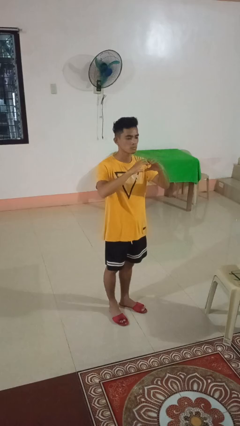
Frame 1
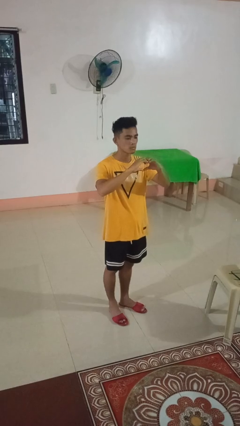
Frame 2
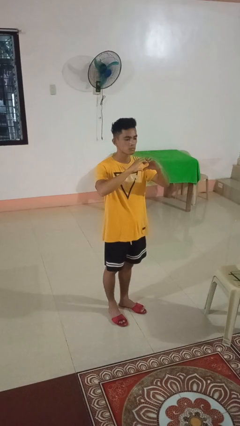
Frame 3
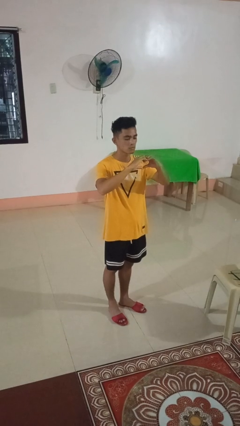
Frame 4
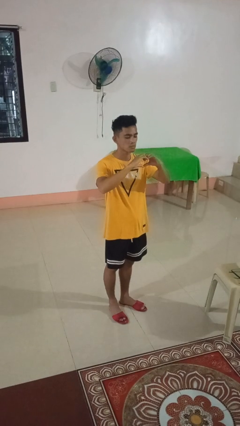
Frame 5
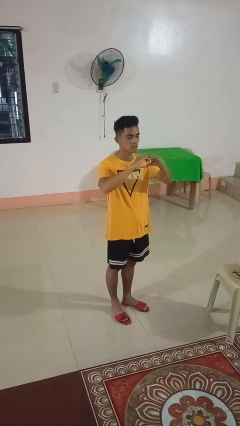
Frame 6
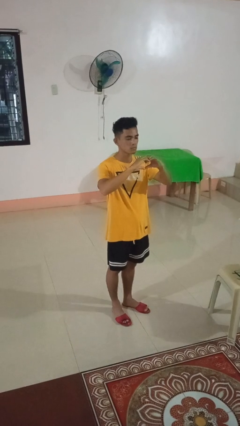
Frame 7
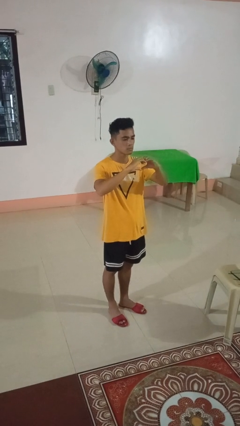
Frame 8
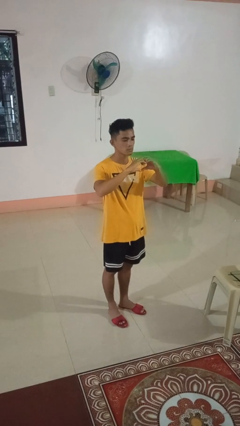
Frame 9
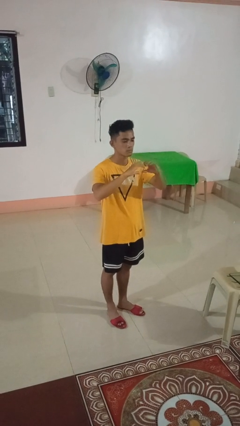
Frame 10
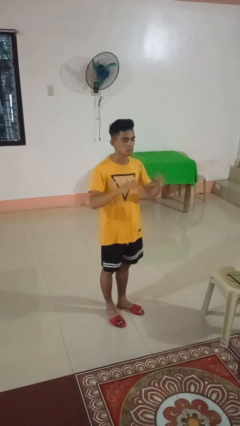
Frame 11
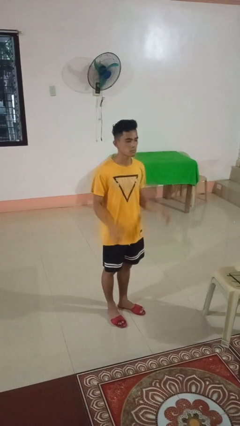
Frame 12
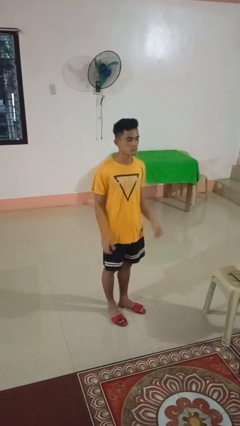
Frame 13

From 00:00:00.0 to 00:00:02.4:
person gestures heart

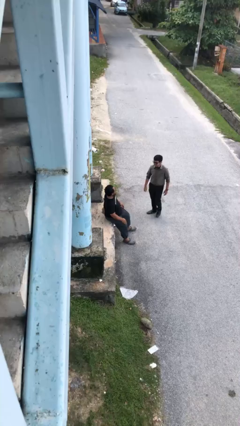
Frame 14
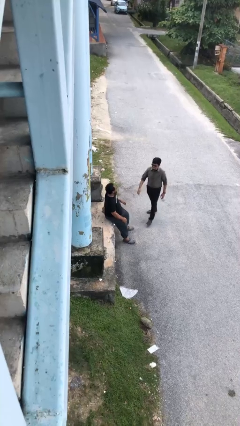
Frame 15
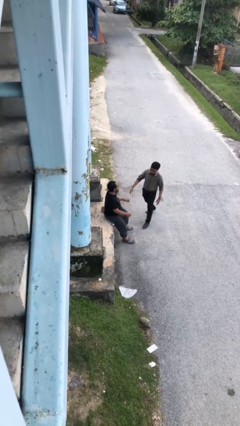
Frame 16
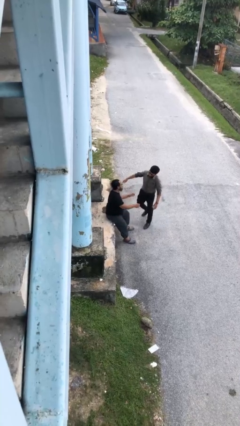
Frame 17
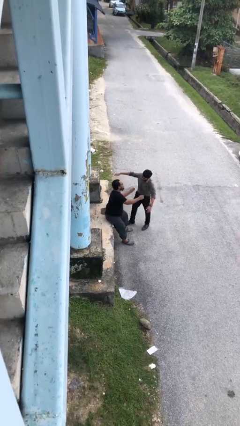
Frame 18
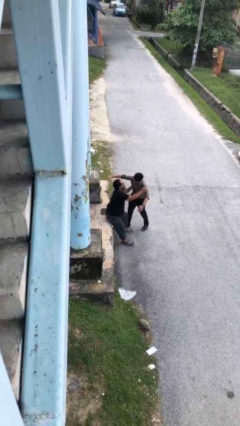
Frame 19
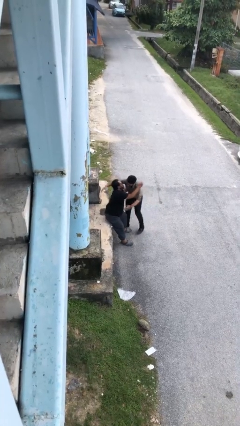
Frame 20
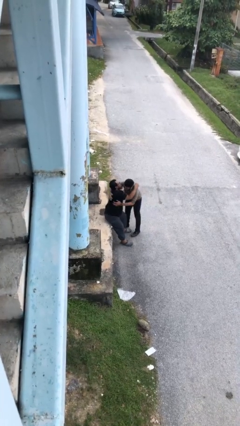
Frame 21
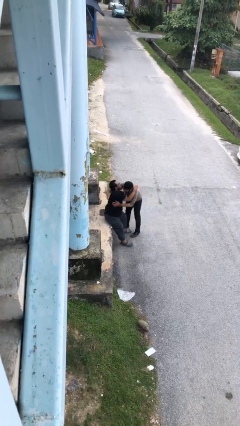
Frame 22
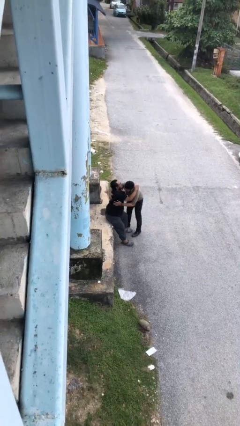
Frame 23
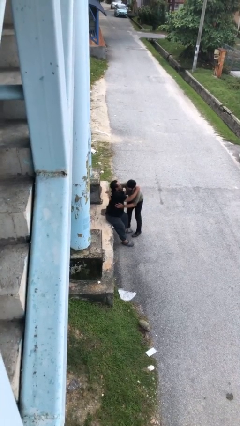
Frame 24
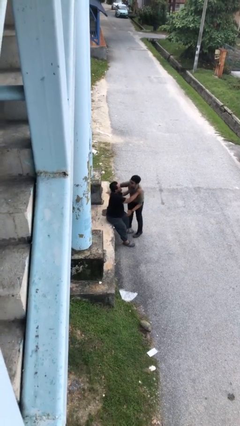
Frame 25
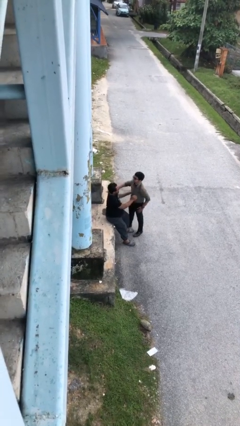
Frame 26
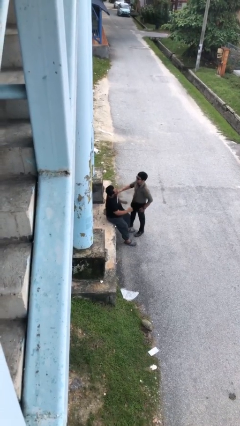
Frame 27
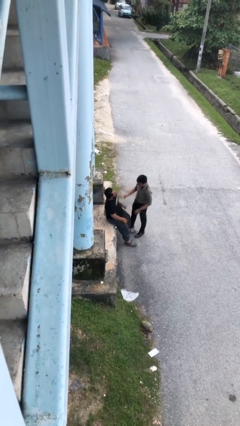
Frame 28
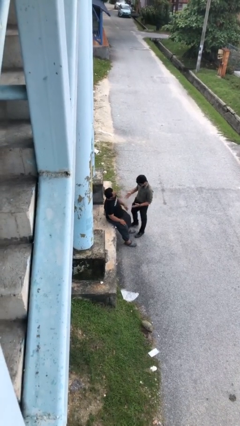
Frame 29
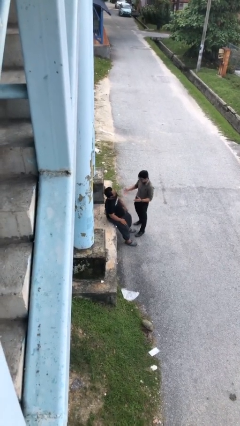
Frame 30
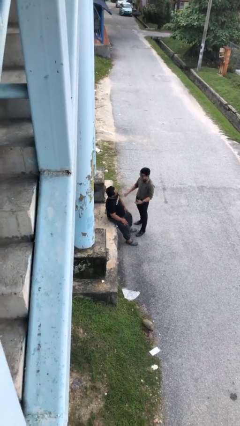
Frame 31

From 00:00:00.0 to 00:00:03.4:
person embraces person

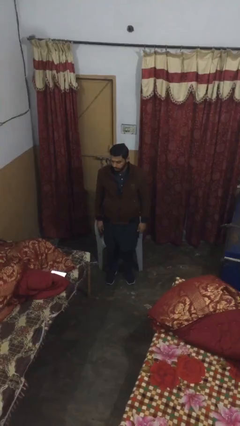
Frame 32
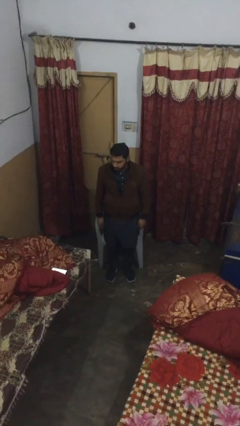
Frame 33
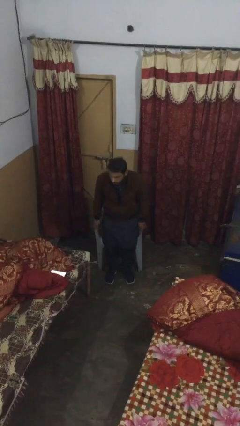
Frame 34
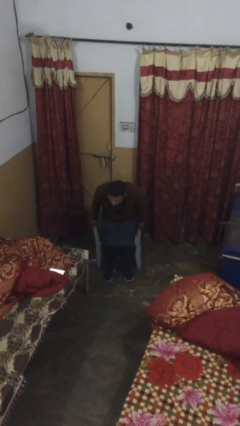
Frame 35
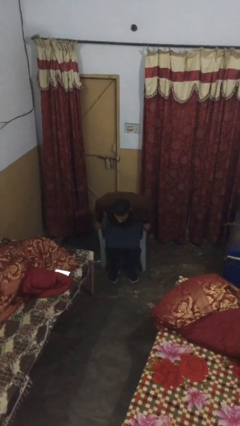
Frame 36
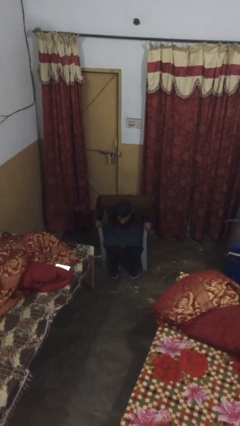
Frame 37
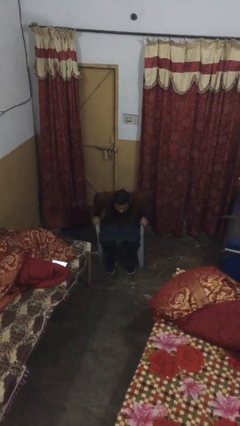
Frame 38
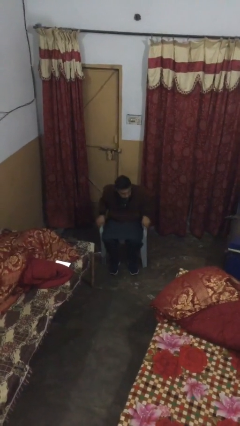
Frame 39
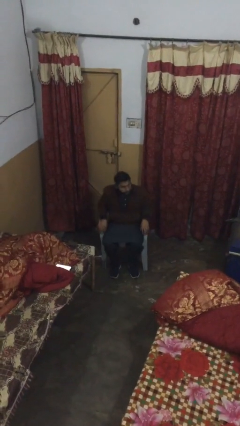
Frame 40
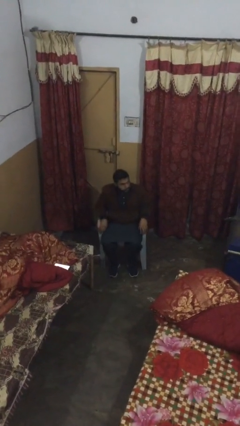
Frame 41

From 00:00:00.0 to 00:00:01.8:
person sits down

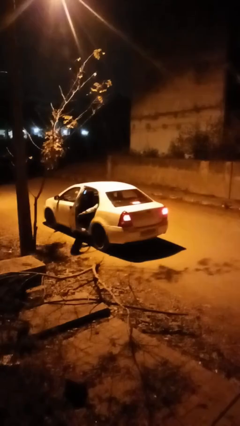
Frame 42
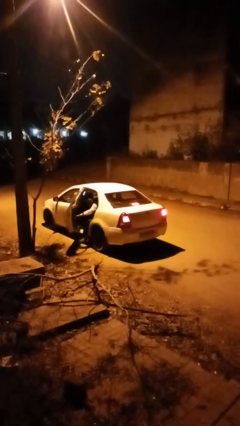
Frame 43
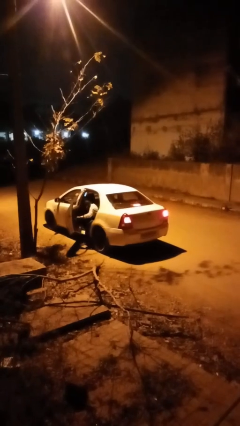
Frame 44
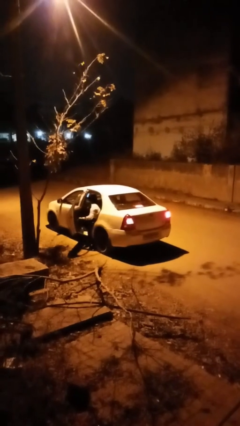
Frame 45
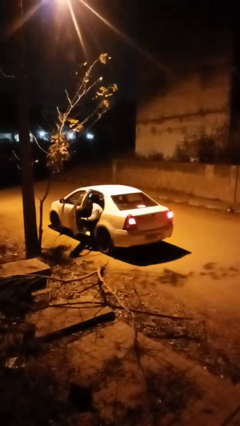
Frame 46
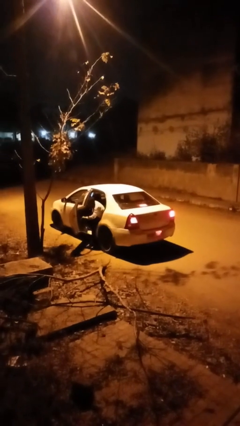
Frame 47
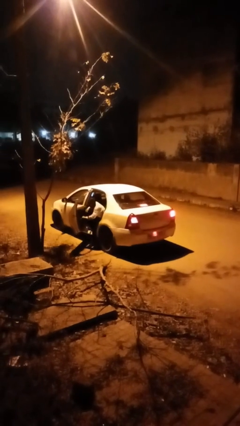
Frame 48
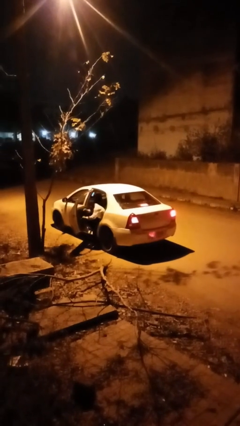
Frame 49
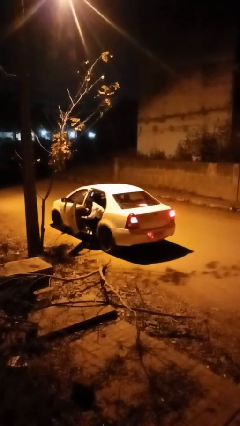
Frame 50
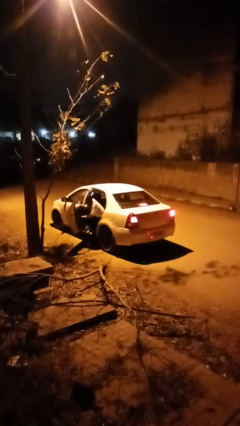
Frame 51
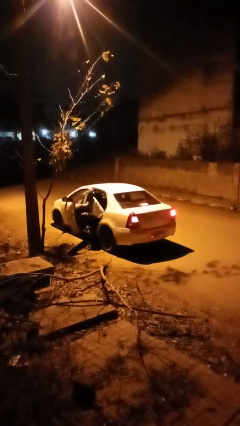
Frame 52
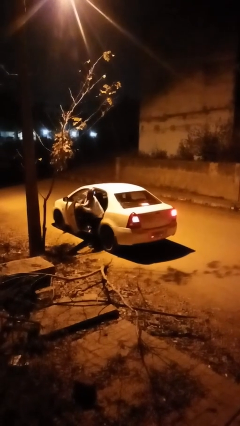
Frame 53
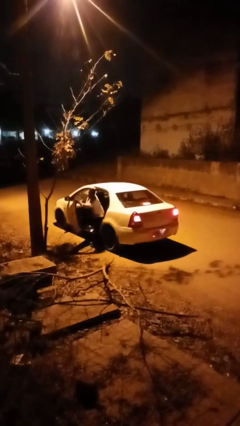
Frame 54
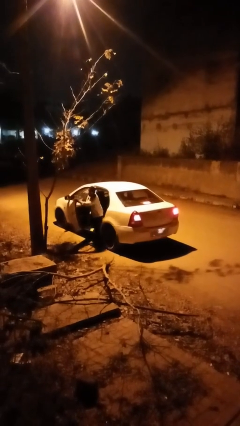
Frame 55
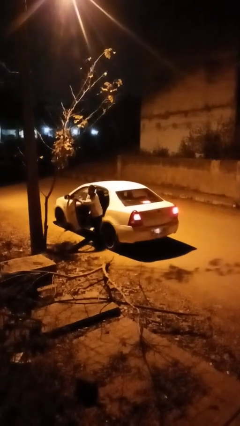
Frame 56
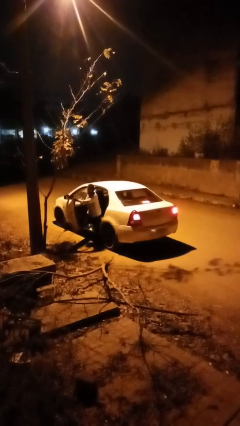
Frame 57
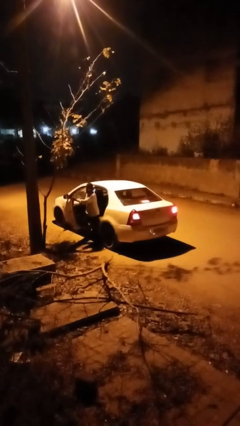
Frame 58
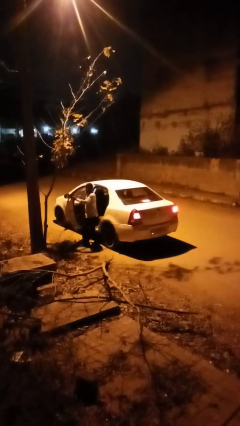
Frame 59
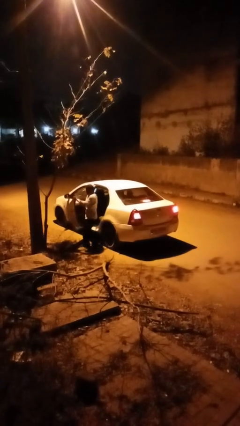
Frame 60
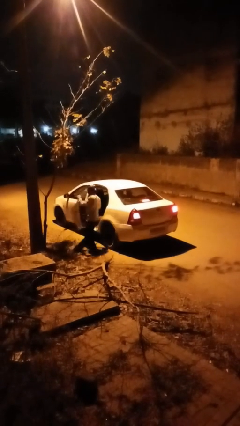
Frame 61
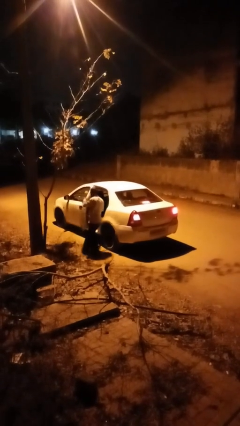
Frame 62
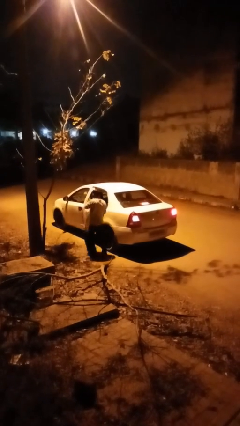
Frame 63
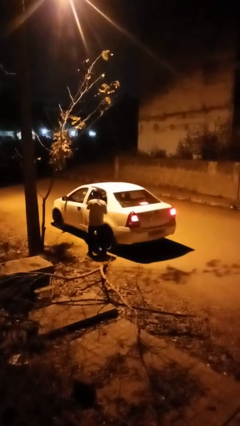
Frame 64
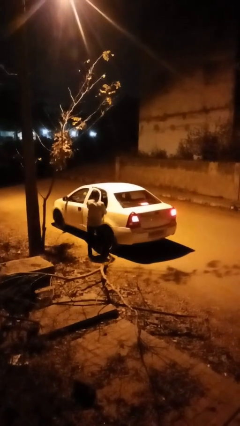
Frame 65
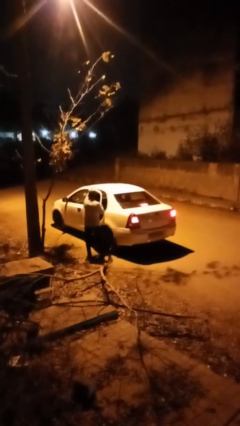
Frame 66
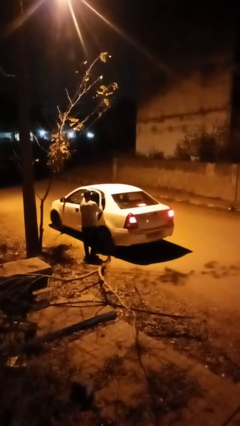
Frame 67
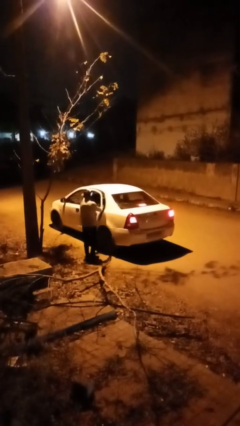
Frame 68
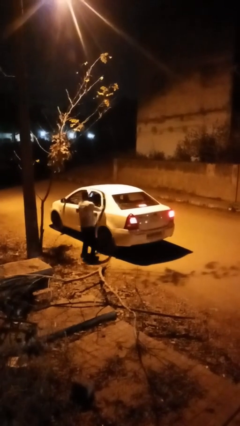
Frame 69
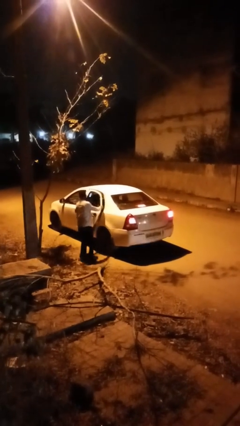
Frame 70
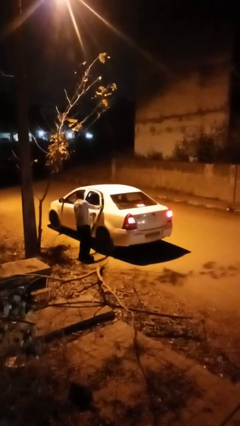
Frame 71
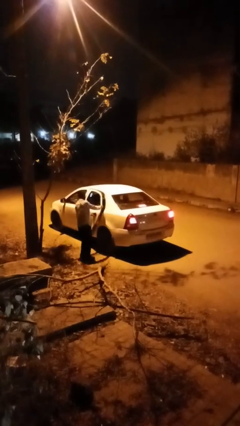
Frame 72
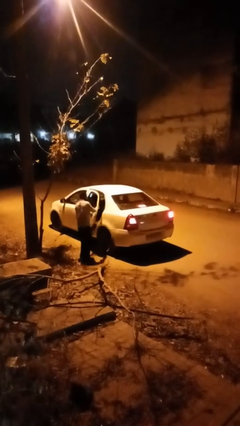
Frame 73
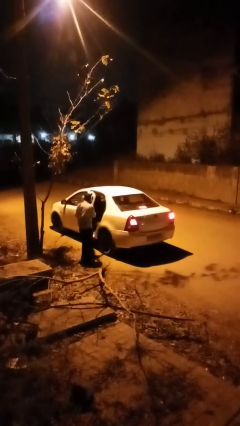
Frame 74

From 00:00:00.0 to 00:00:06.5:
car drops off person

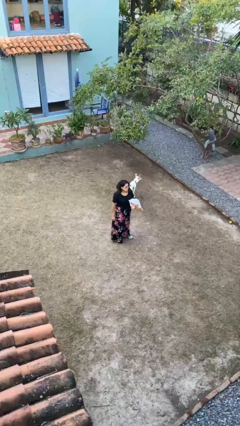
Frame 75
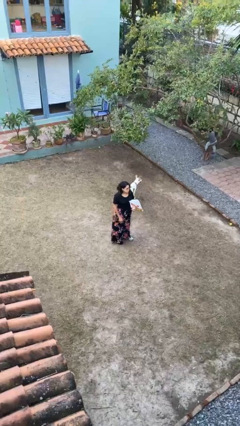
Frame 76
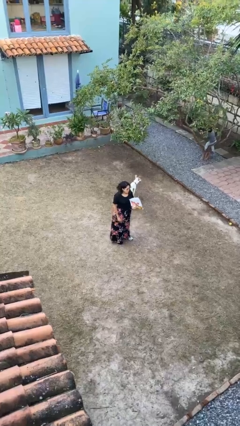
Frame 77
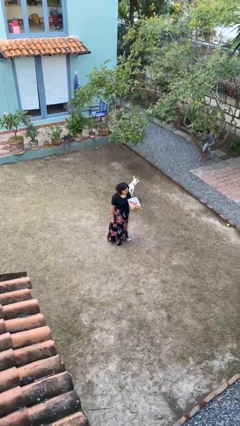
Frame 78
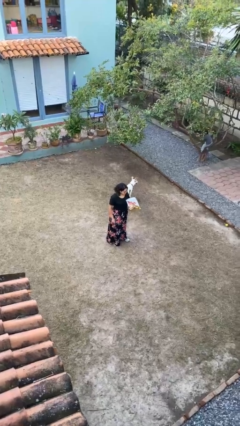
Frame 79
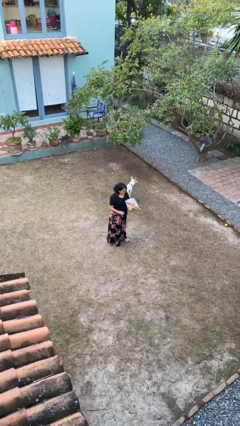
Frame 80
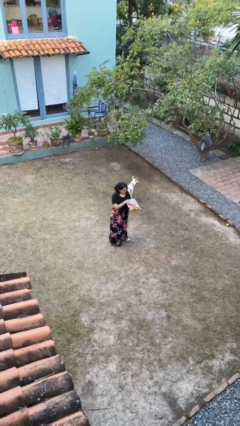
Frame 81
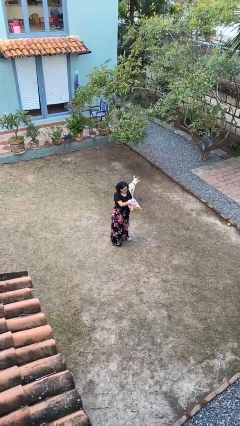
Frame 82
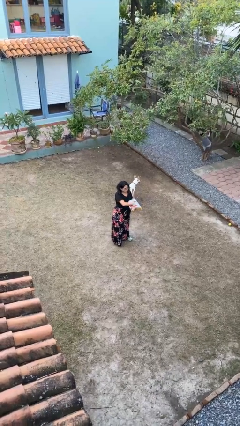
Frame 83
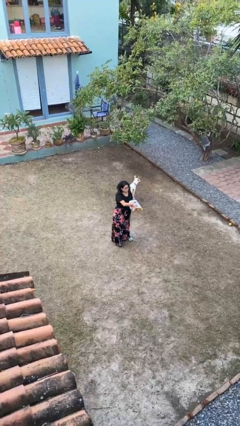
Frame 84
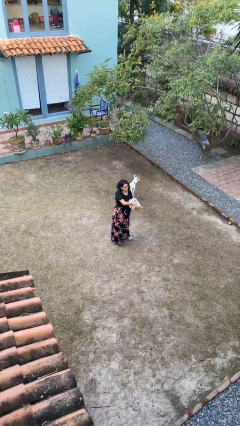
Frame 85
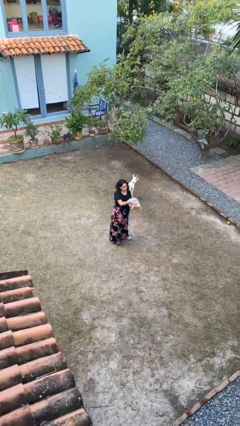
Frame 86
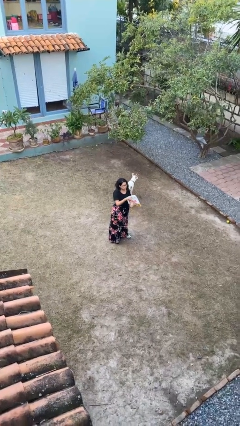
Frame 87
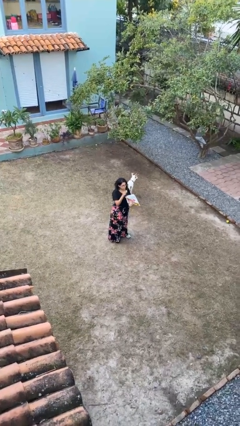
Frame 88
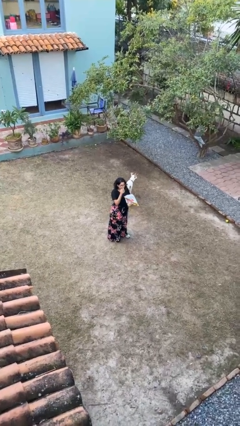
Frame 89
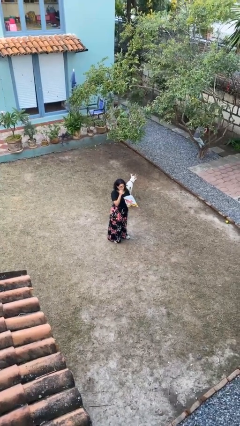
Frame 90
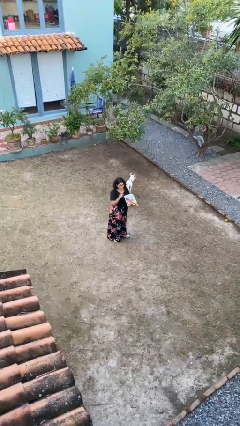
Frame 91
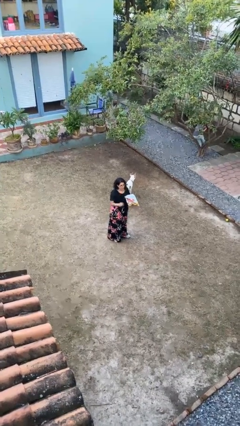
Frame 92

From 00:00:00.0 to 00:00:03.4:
person eats snack from bag
